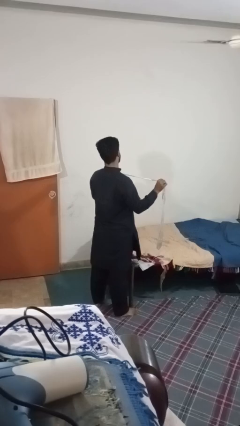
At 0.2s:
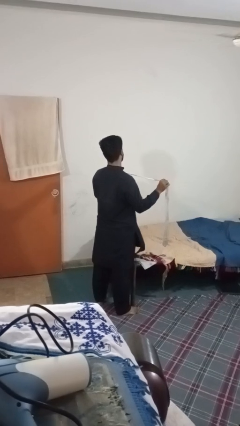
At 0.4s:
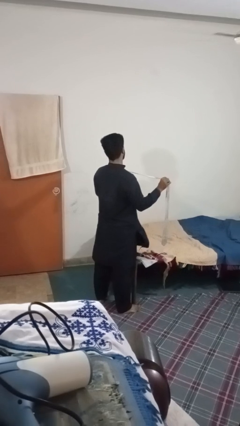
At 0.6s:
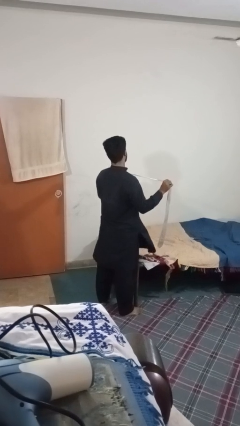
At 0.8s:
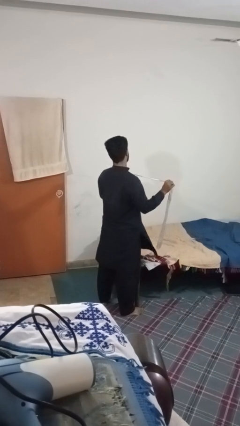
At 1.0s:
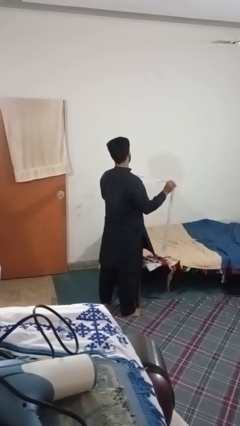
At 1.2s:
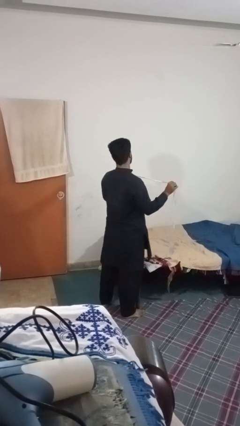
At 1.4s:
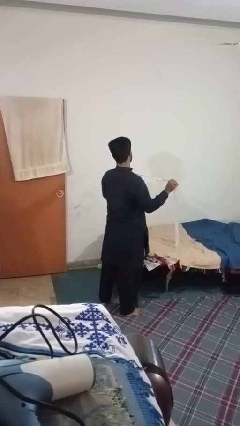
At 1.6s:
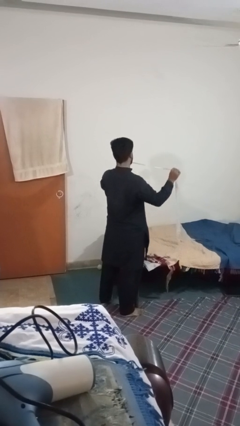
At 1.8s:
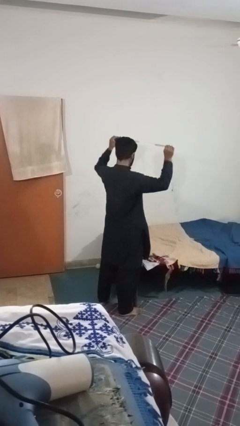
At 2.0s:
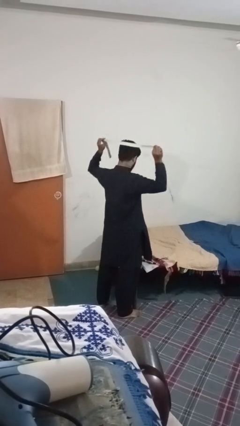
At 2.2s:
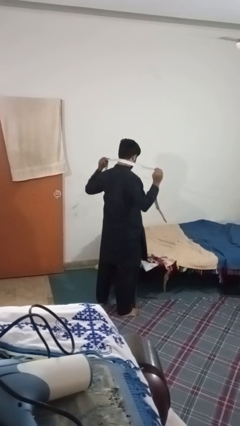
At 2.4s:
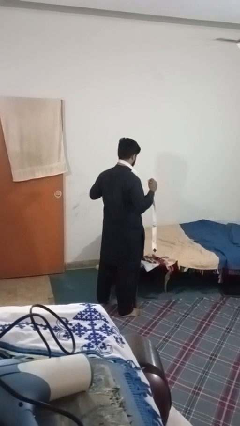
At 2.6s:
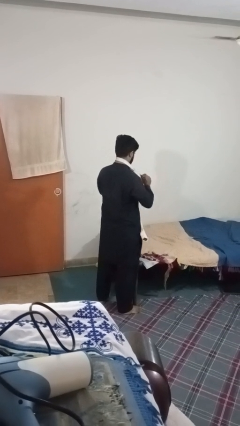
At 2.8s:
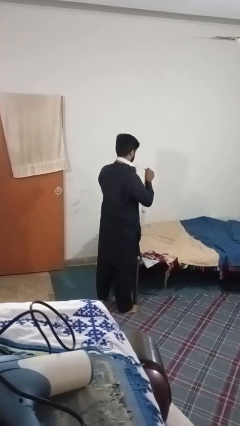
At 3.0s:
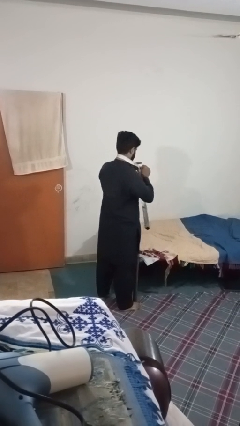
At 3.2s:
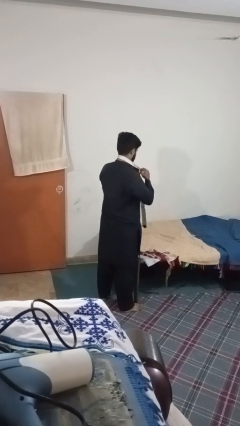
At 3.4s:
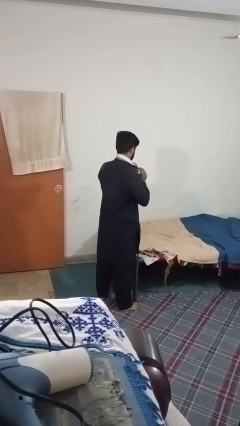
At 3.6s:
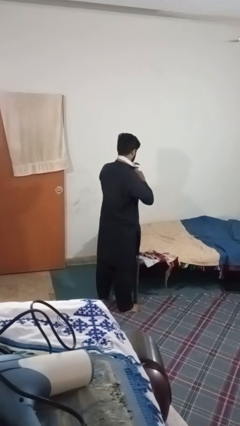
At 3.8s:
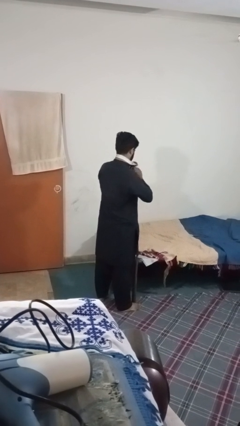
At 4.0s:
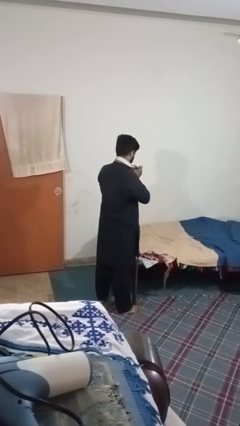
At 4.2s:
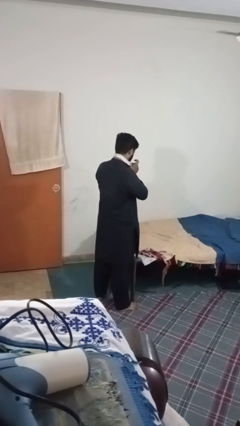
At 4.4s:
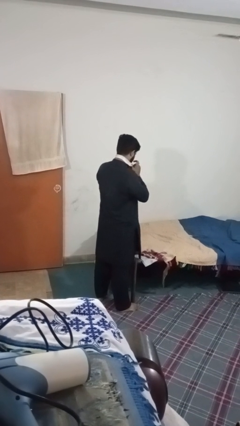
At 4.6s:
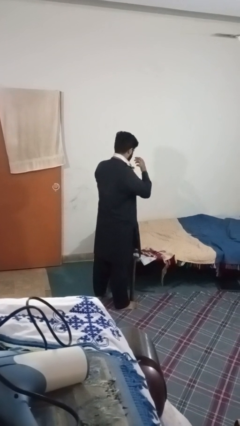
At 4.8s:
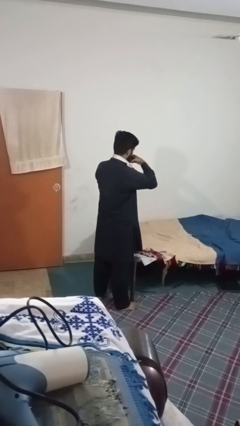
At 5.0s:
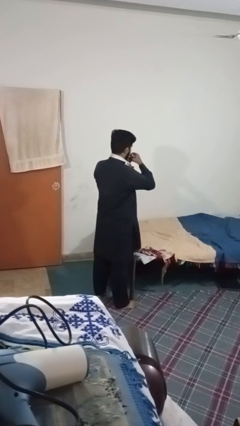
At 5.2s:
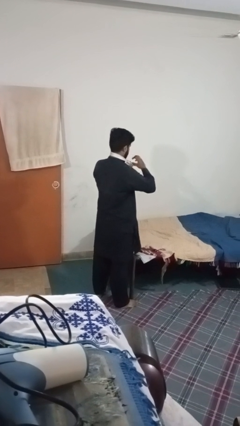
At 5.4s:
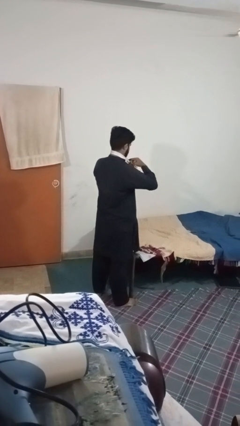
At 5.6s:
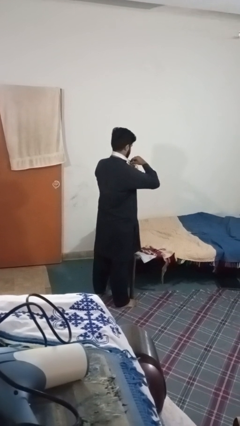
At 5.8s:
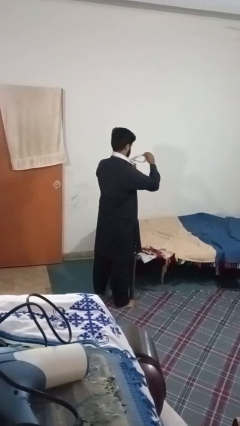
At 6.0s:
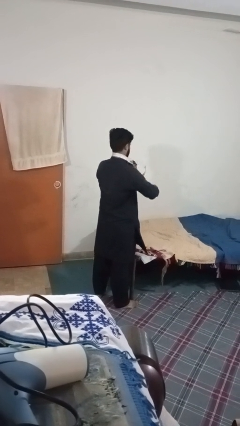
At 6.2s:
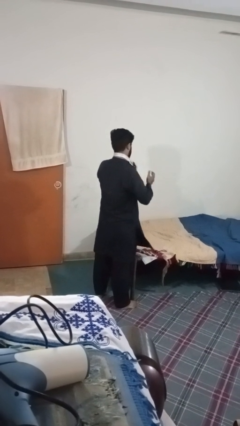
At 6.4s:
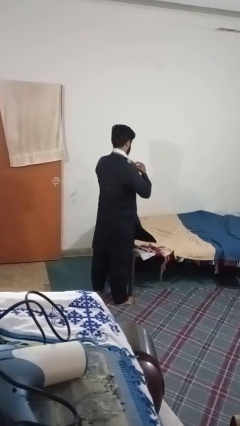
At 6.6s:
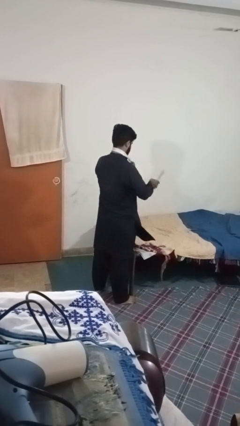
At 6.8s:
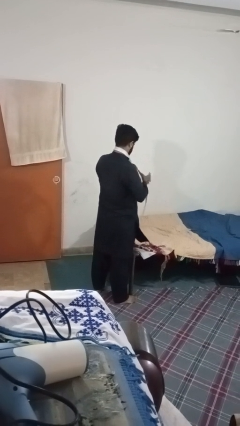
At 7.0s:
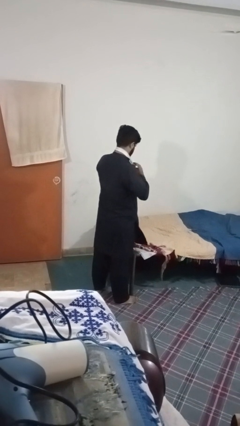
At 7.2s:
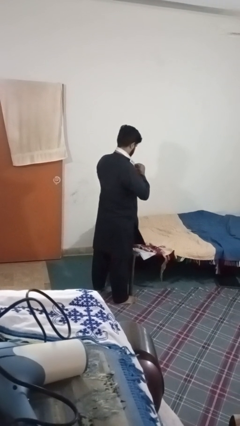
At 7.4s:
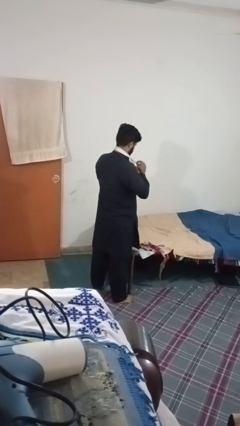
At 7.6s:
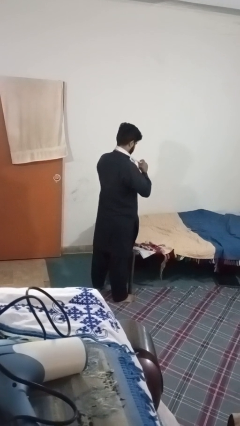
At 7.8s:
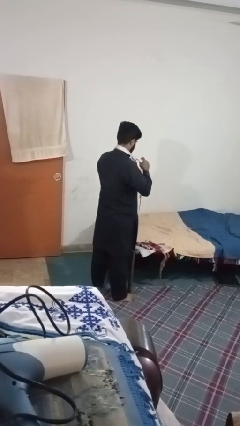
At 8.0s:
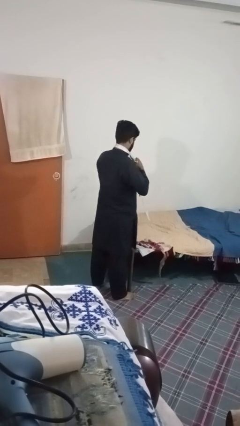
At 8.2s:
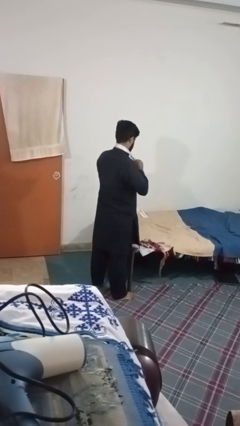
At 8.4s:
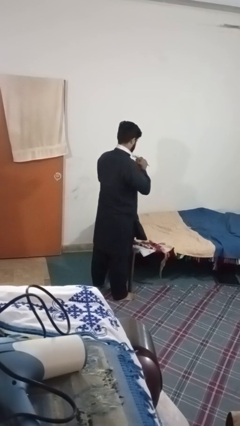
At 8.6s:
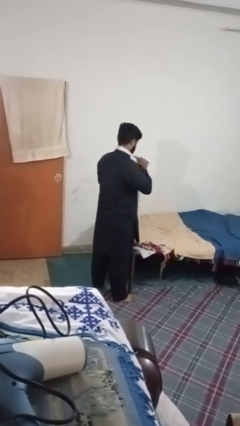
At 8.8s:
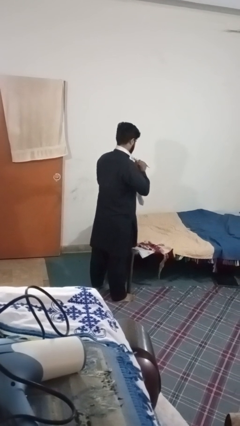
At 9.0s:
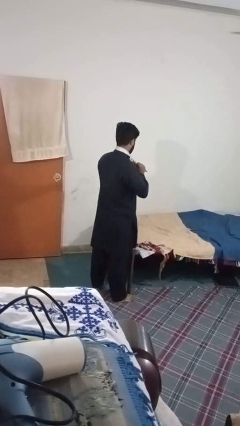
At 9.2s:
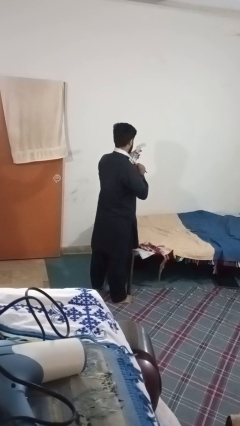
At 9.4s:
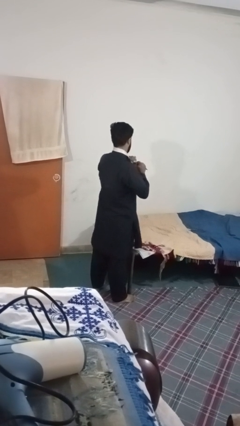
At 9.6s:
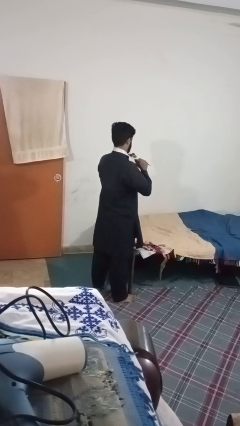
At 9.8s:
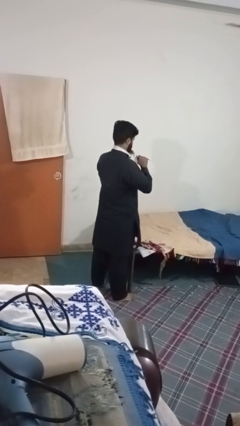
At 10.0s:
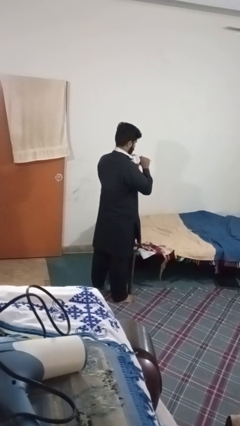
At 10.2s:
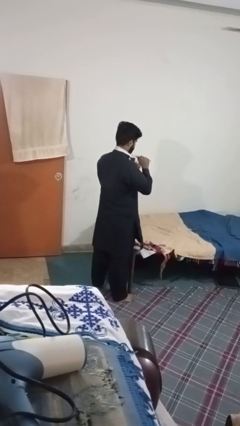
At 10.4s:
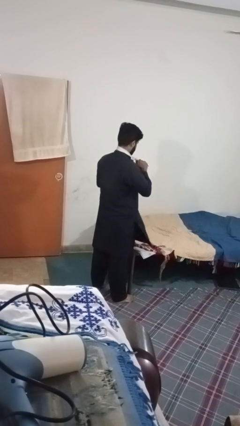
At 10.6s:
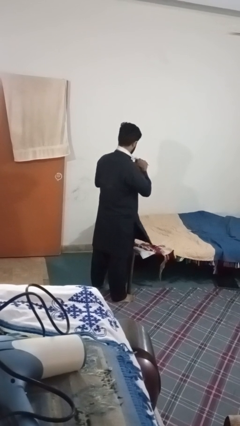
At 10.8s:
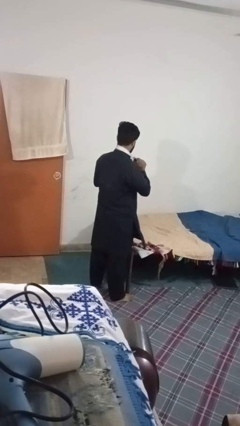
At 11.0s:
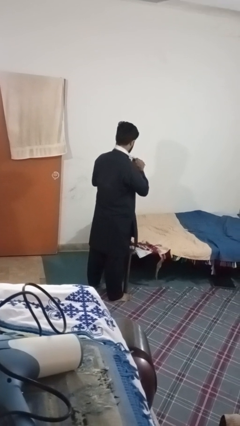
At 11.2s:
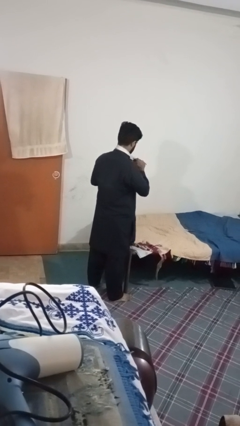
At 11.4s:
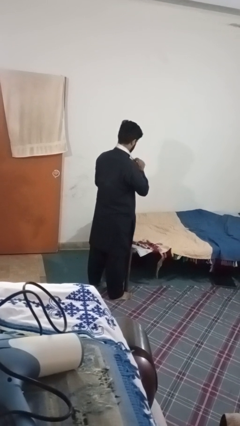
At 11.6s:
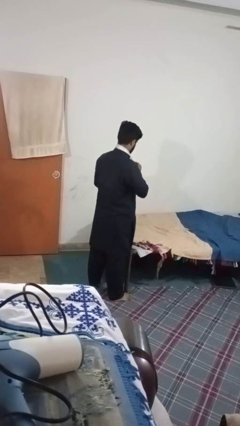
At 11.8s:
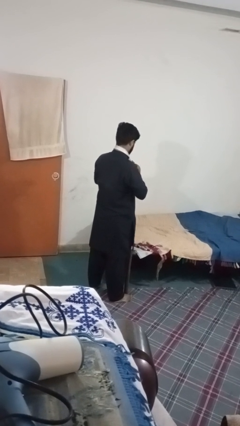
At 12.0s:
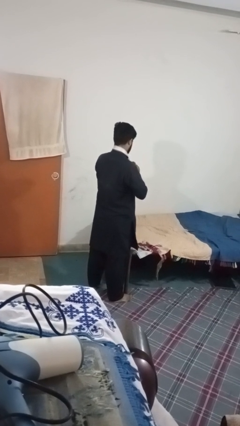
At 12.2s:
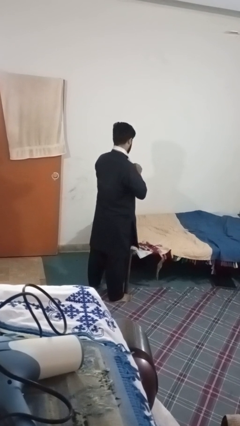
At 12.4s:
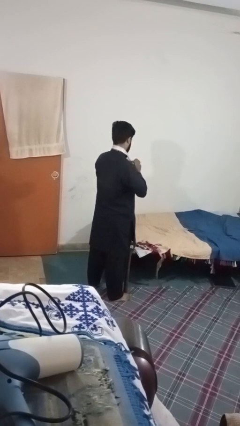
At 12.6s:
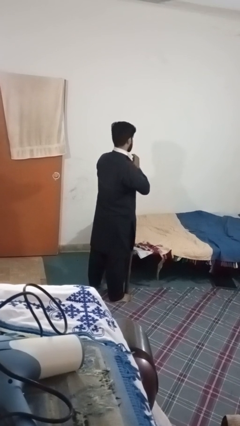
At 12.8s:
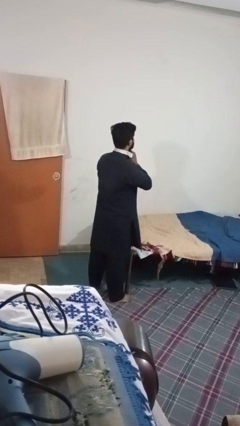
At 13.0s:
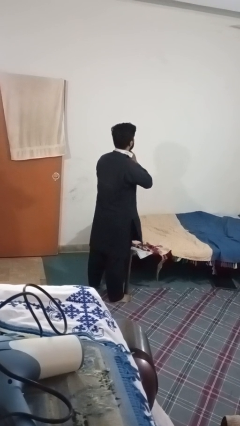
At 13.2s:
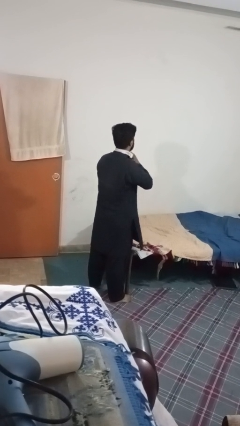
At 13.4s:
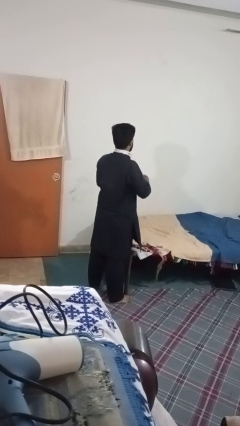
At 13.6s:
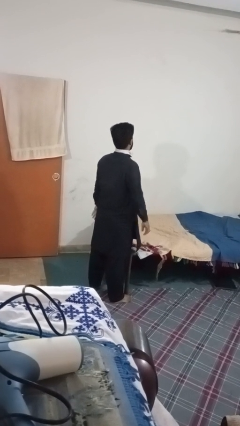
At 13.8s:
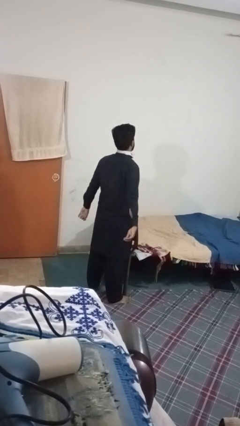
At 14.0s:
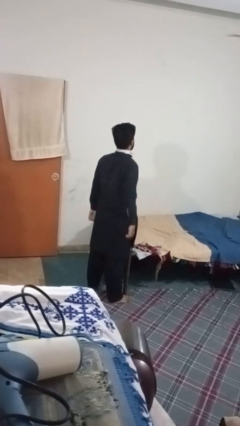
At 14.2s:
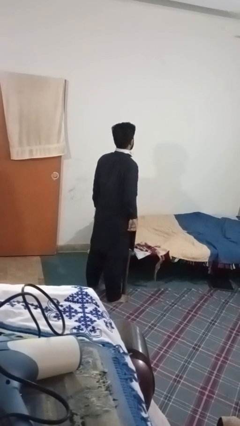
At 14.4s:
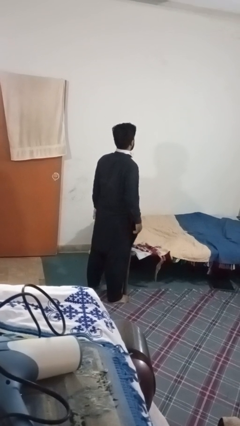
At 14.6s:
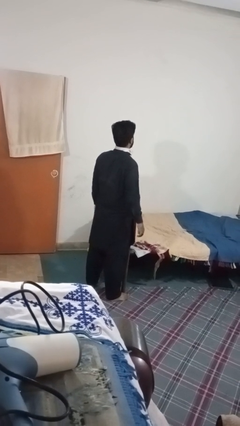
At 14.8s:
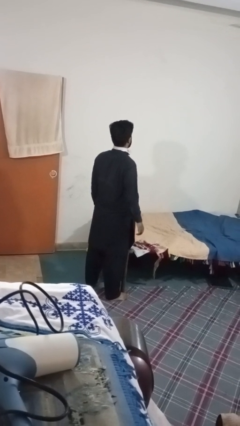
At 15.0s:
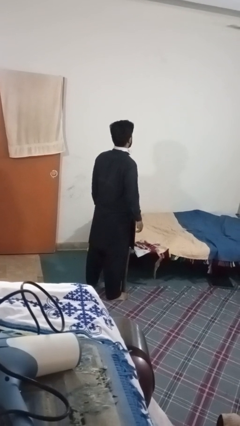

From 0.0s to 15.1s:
person puts on necktie

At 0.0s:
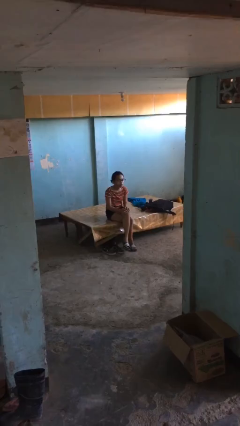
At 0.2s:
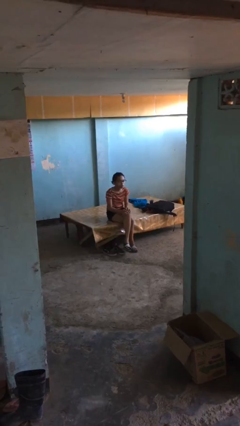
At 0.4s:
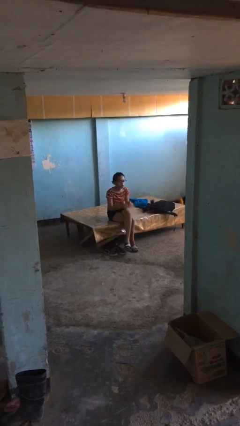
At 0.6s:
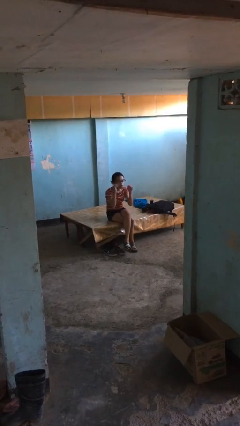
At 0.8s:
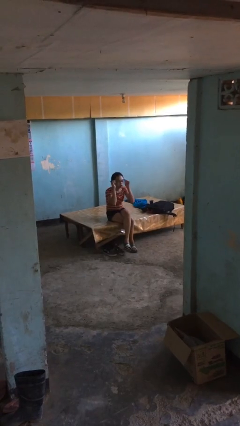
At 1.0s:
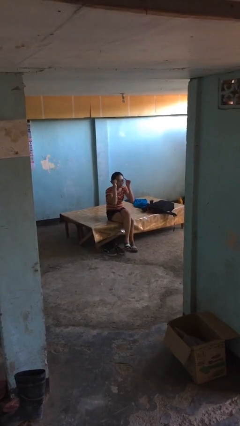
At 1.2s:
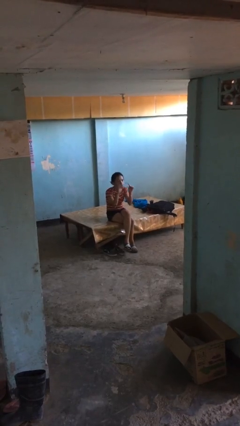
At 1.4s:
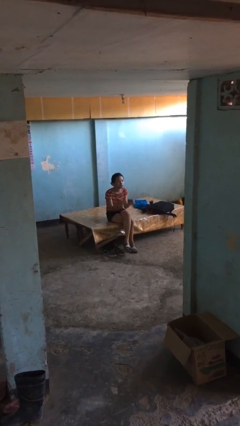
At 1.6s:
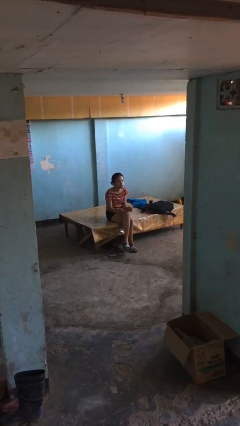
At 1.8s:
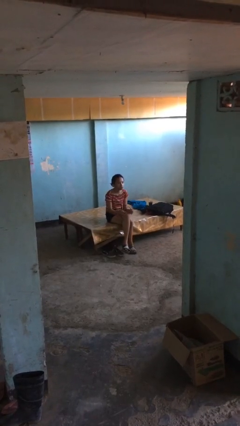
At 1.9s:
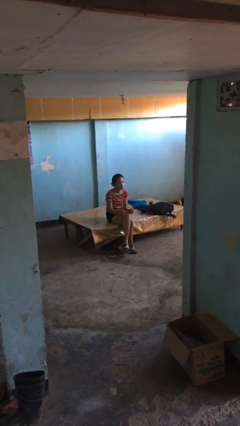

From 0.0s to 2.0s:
person takes off glasses

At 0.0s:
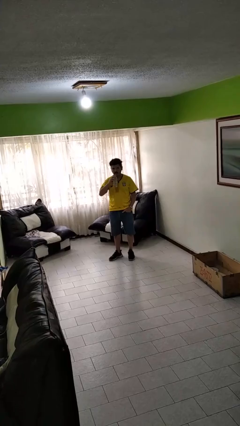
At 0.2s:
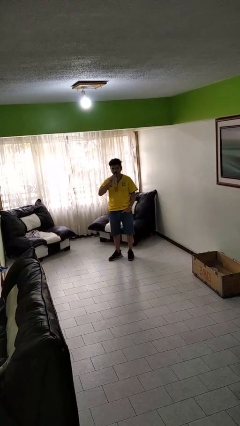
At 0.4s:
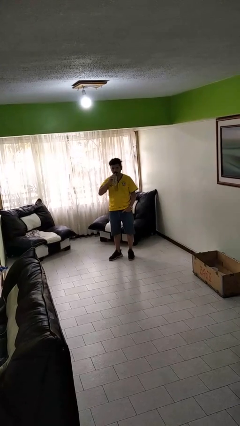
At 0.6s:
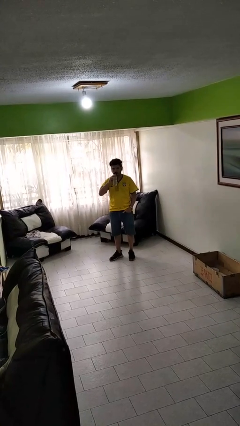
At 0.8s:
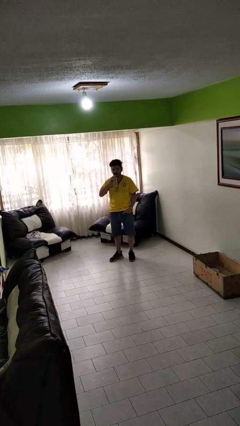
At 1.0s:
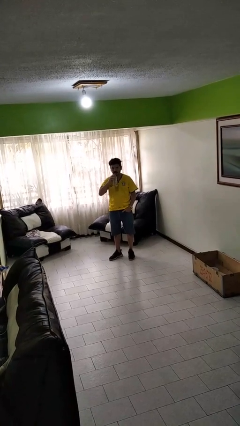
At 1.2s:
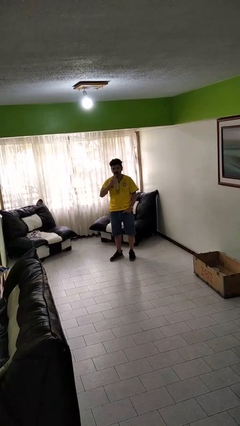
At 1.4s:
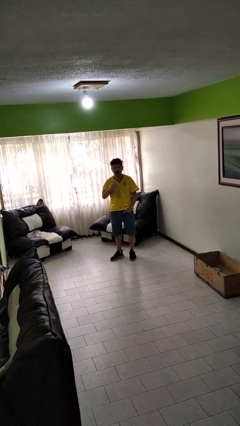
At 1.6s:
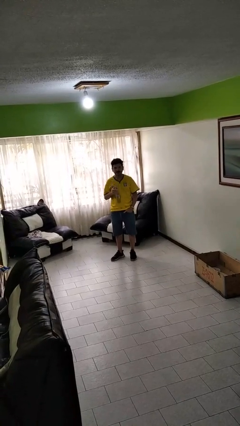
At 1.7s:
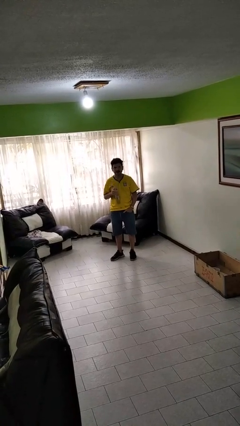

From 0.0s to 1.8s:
person drinks from straw
